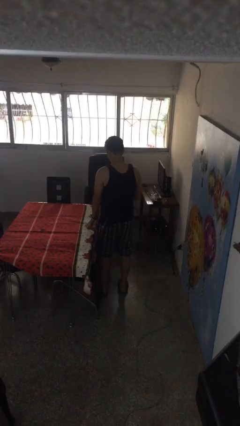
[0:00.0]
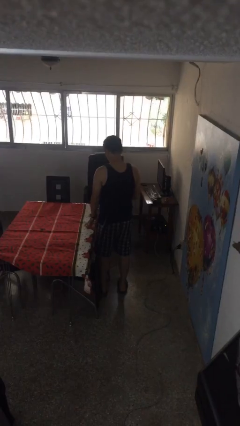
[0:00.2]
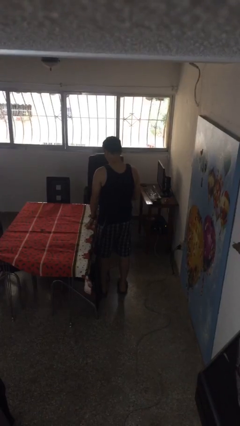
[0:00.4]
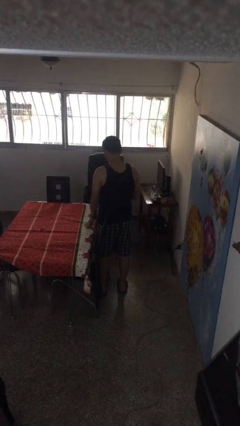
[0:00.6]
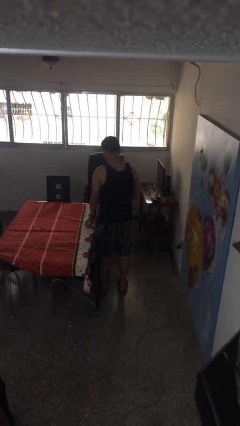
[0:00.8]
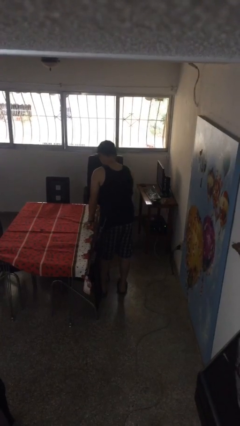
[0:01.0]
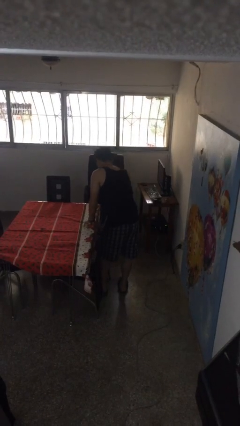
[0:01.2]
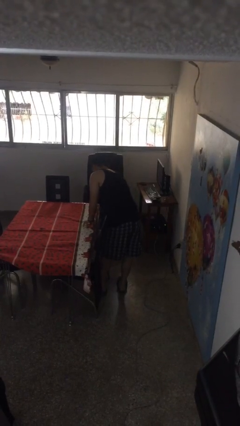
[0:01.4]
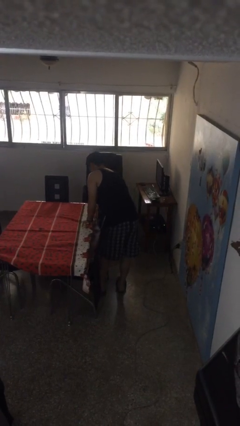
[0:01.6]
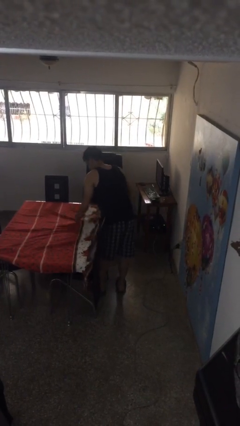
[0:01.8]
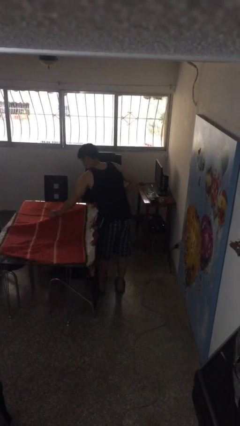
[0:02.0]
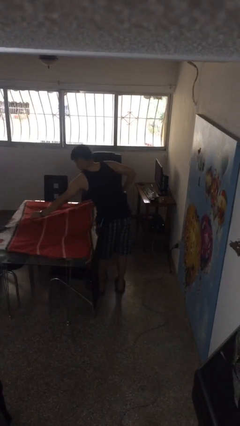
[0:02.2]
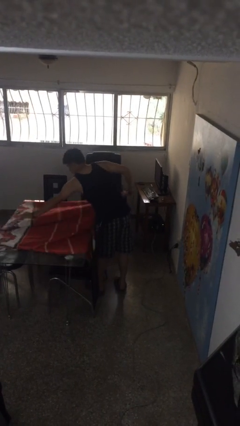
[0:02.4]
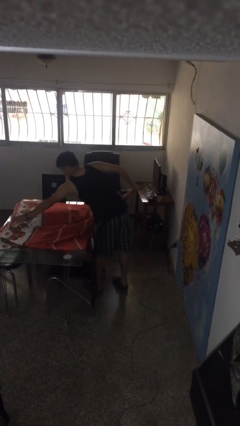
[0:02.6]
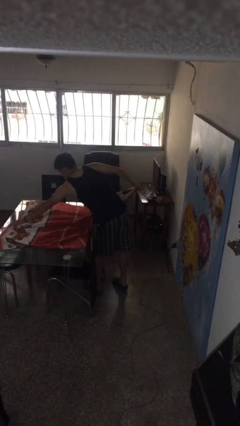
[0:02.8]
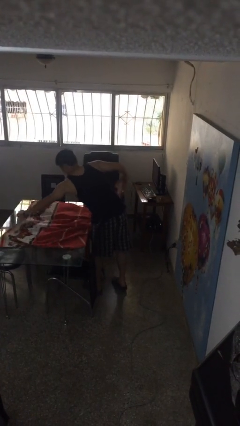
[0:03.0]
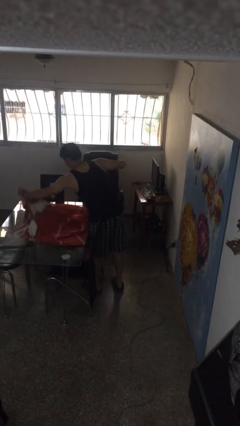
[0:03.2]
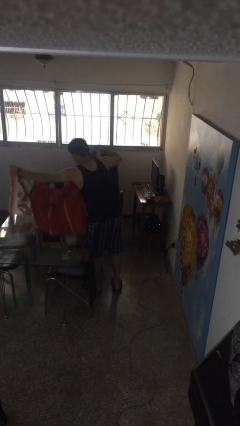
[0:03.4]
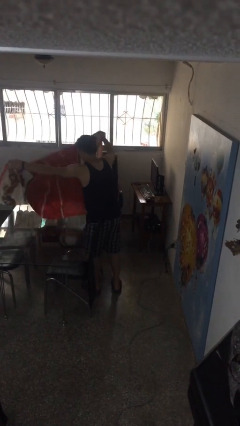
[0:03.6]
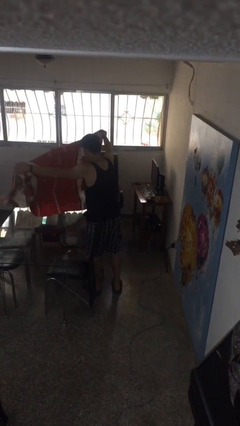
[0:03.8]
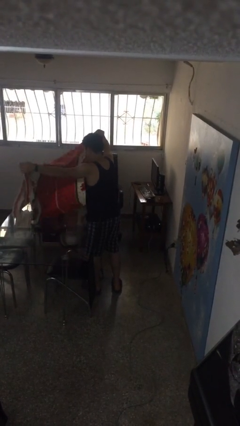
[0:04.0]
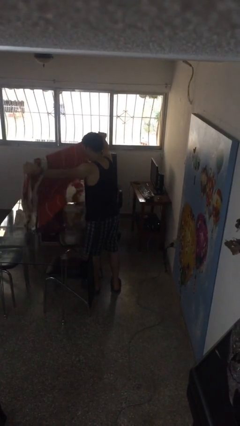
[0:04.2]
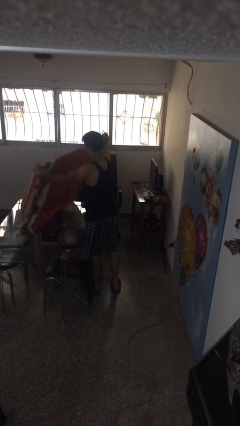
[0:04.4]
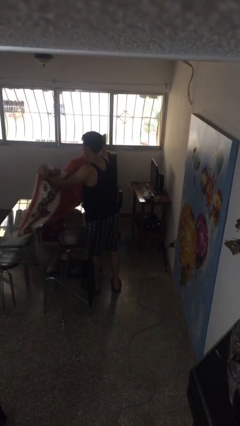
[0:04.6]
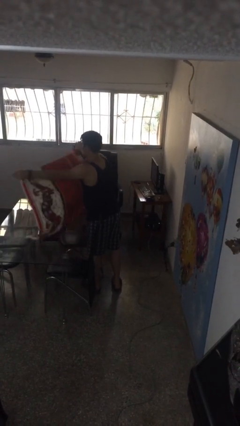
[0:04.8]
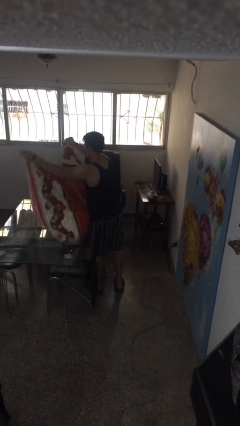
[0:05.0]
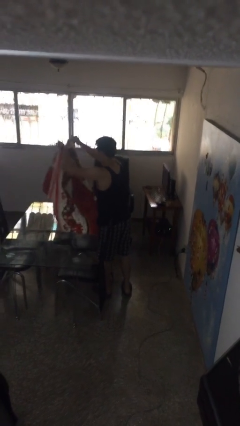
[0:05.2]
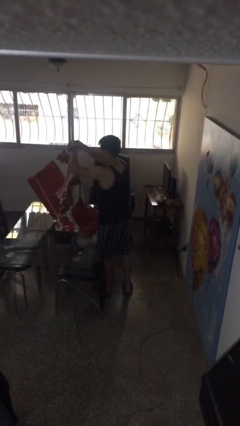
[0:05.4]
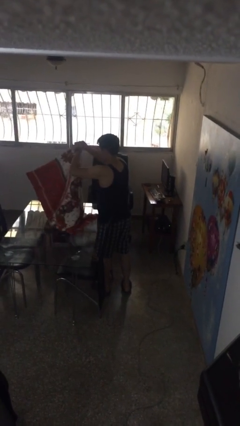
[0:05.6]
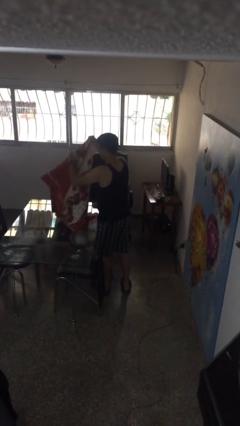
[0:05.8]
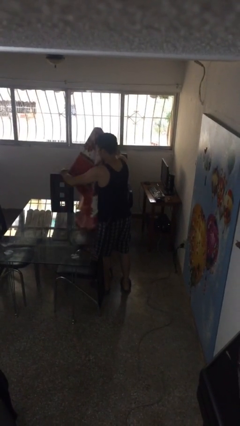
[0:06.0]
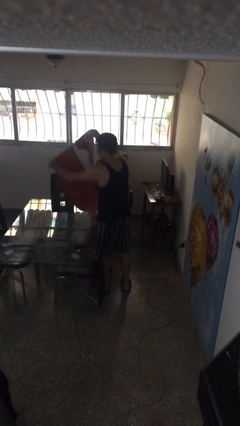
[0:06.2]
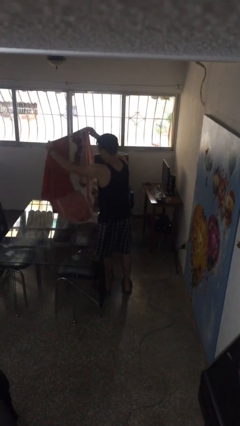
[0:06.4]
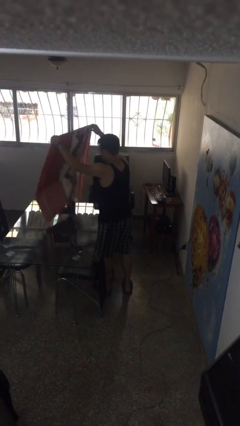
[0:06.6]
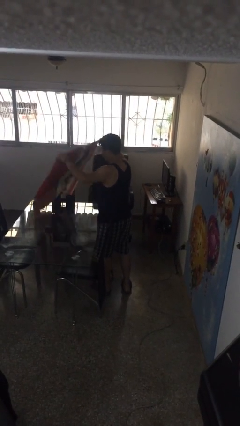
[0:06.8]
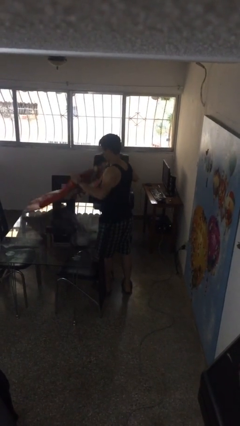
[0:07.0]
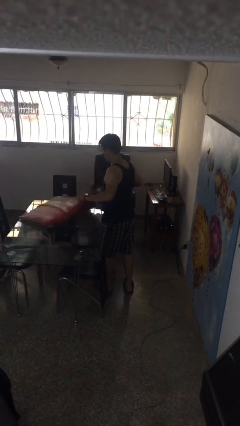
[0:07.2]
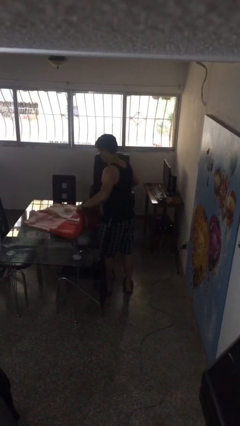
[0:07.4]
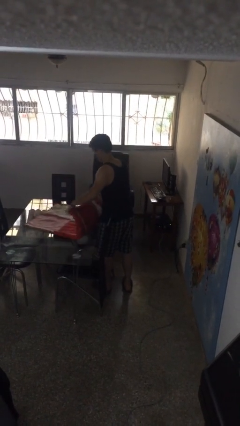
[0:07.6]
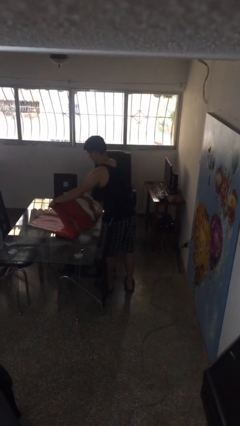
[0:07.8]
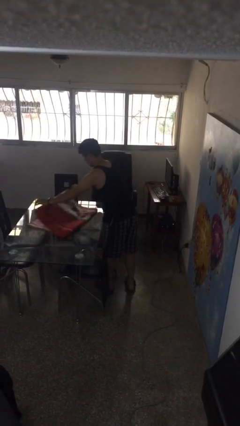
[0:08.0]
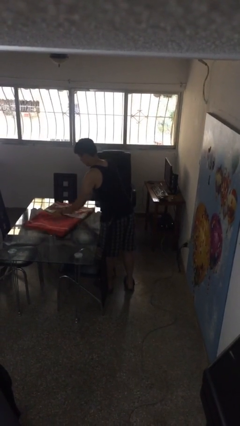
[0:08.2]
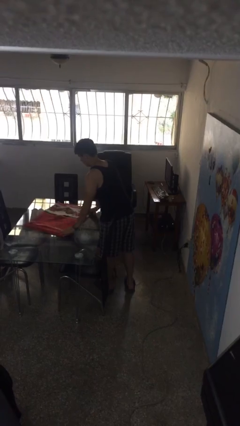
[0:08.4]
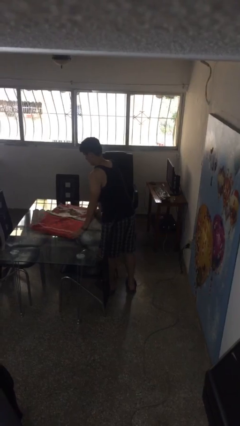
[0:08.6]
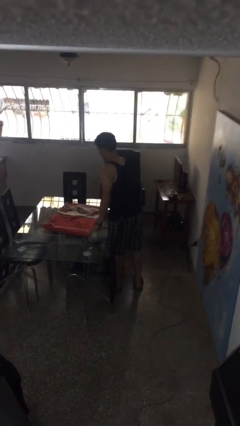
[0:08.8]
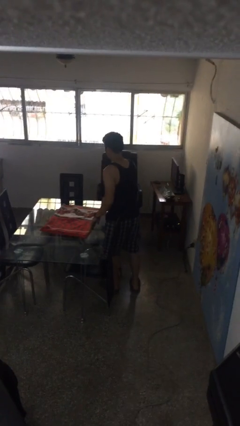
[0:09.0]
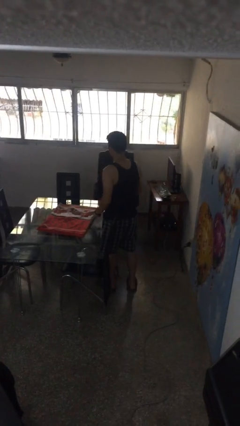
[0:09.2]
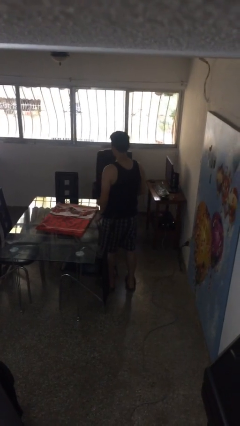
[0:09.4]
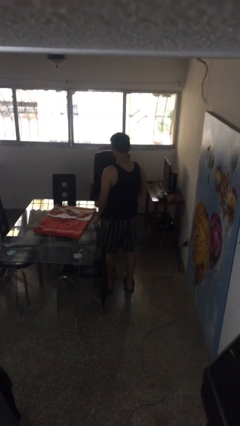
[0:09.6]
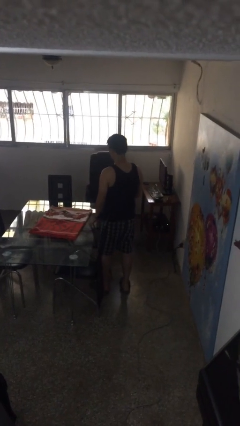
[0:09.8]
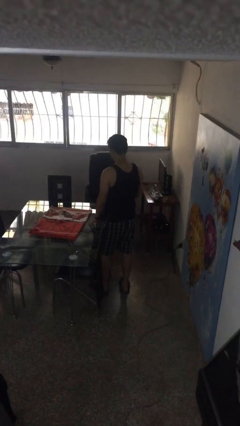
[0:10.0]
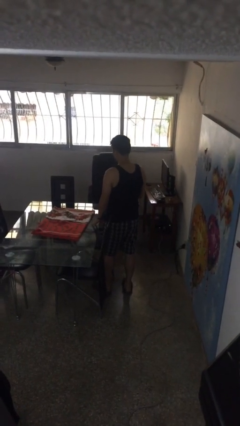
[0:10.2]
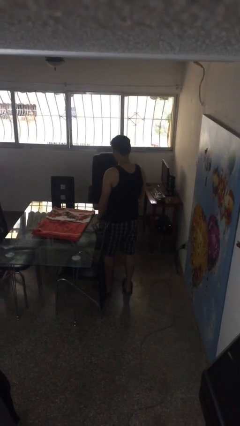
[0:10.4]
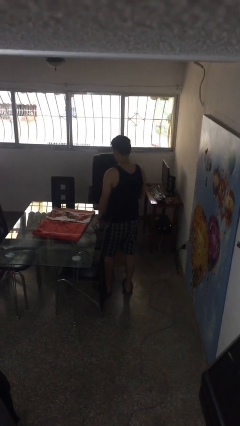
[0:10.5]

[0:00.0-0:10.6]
person folds tablecloth

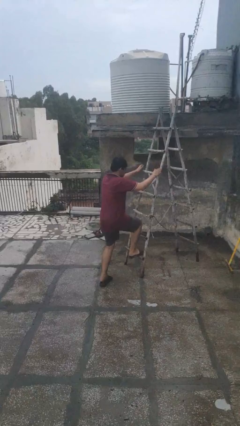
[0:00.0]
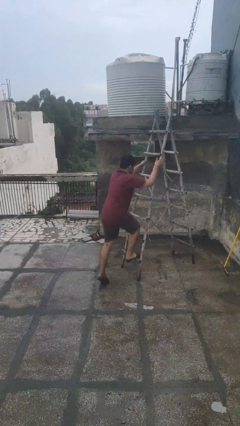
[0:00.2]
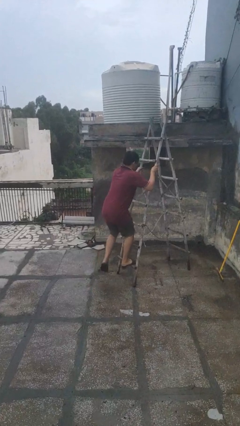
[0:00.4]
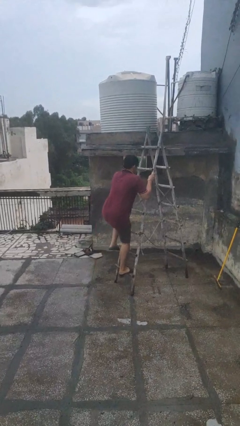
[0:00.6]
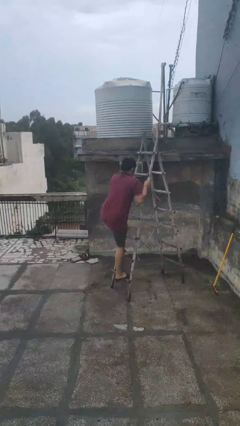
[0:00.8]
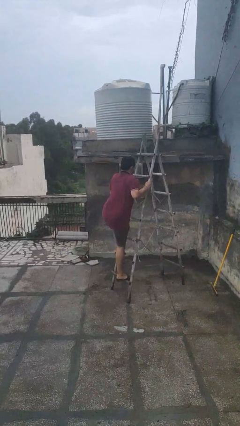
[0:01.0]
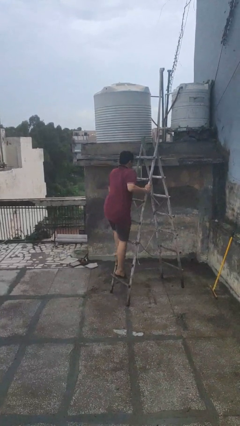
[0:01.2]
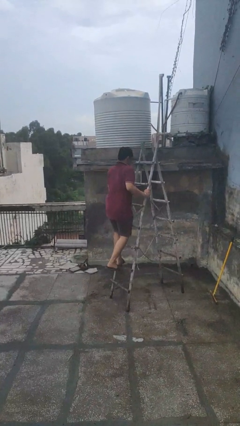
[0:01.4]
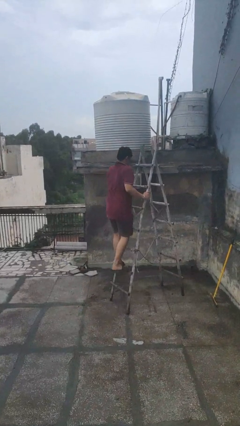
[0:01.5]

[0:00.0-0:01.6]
person climbs up ladder

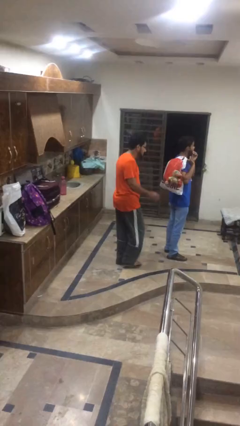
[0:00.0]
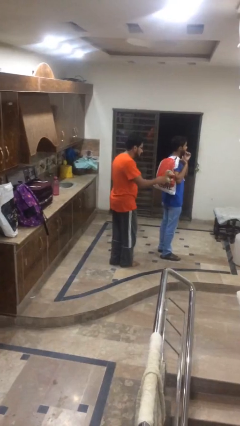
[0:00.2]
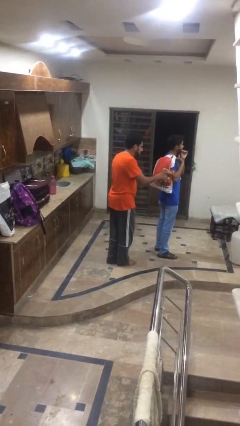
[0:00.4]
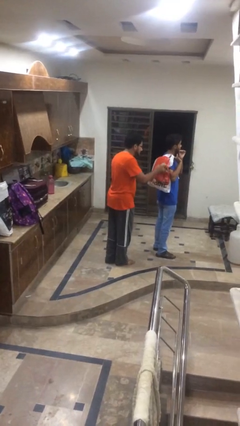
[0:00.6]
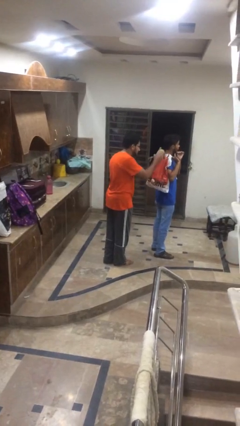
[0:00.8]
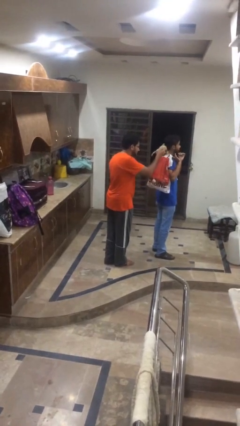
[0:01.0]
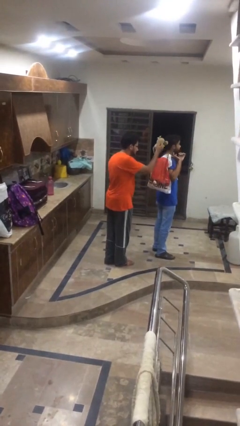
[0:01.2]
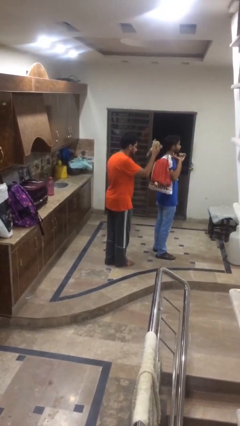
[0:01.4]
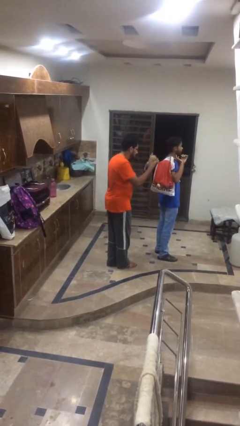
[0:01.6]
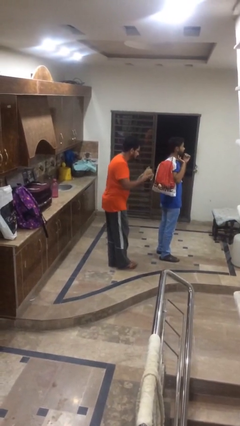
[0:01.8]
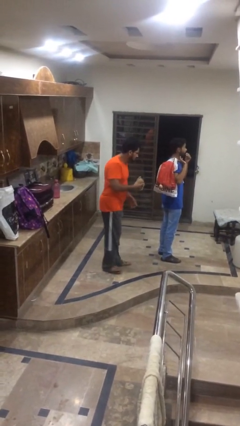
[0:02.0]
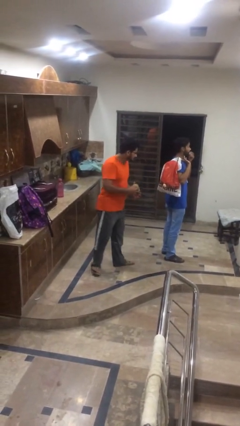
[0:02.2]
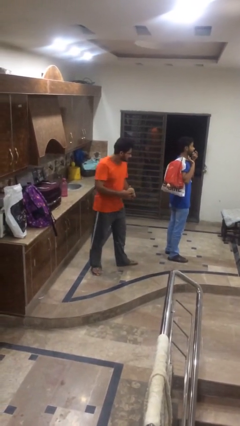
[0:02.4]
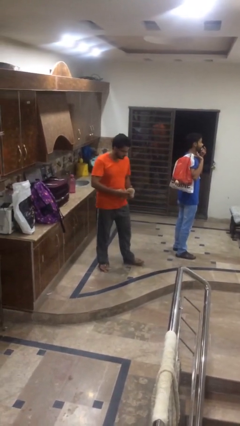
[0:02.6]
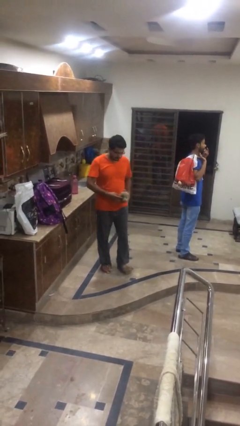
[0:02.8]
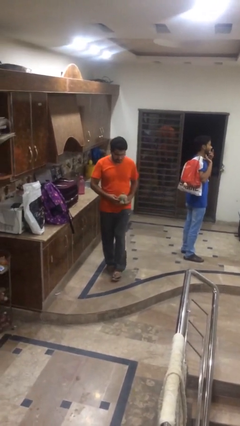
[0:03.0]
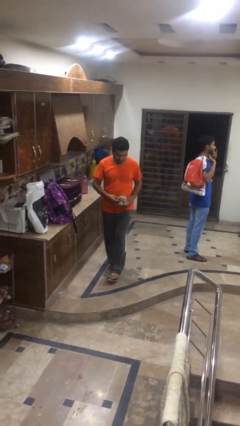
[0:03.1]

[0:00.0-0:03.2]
person steals object from person

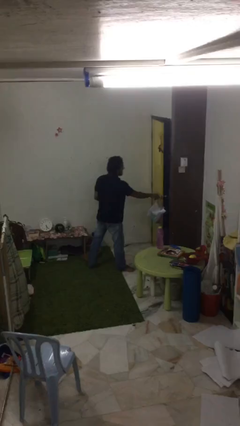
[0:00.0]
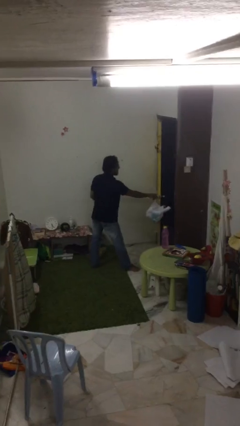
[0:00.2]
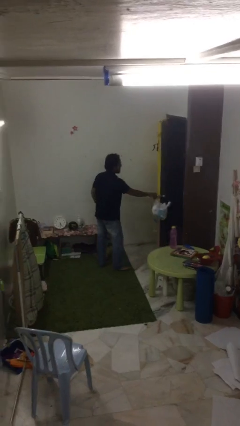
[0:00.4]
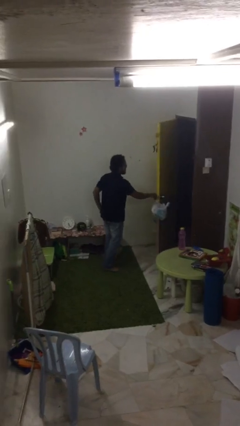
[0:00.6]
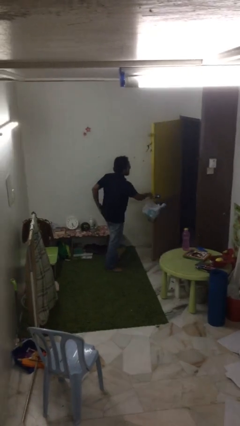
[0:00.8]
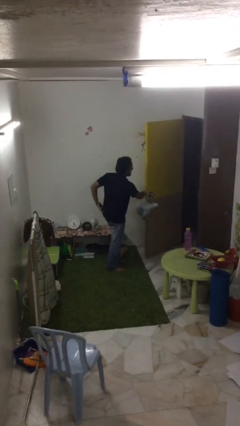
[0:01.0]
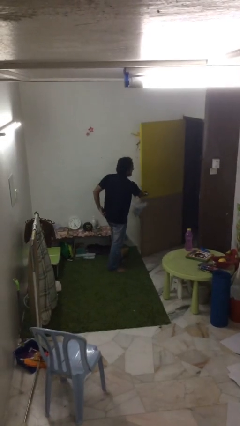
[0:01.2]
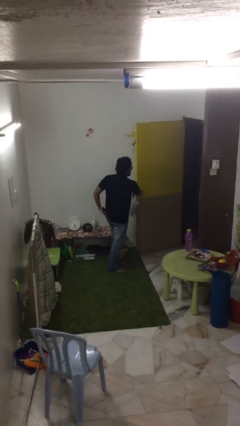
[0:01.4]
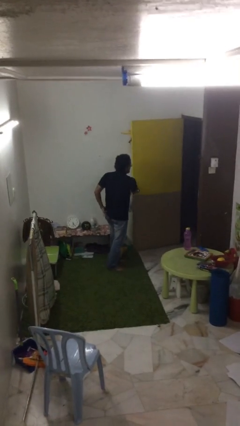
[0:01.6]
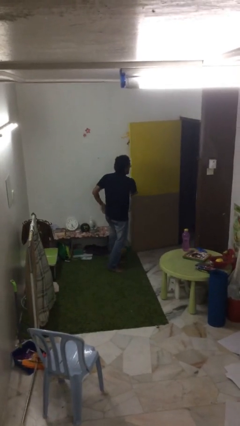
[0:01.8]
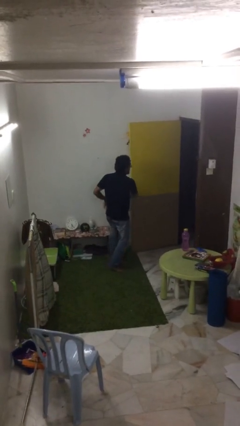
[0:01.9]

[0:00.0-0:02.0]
person opens facility door

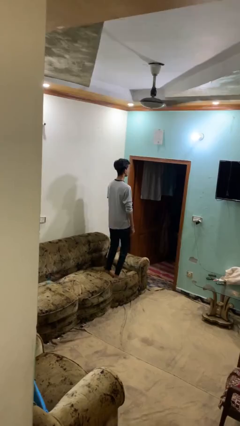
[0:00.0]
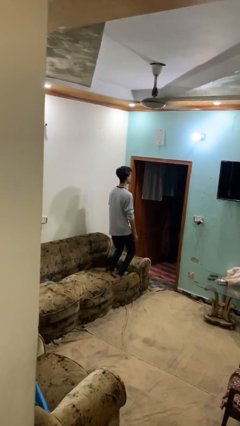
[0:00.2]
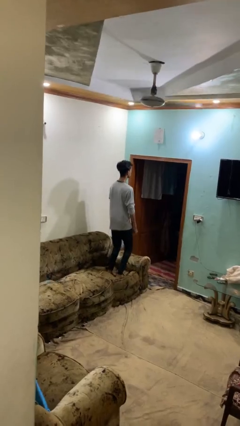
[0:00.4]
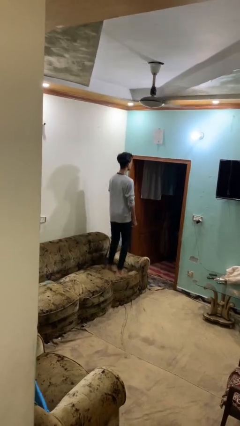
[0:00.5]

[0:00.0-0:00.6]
person jumps on couch
